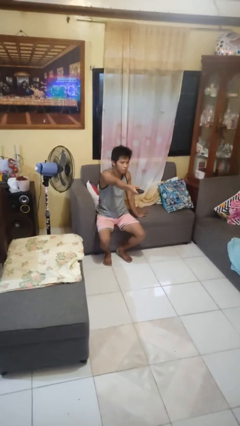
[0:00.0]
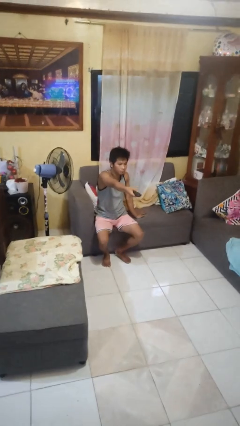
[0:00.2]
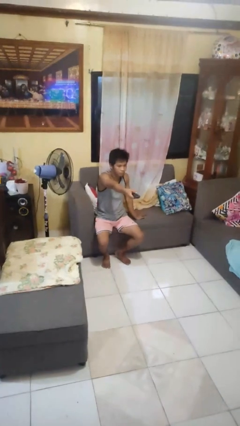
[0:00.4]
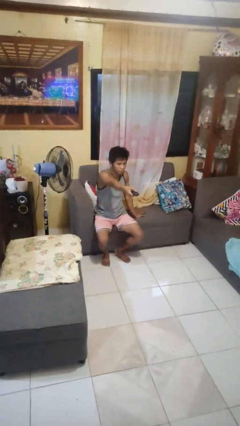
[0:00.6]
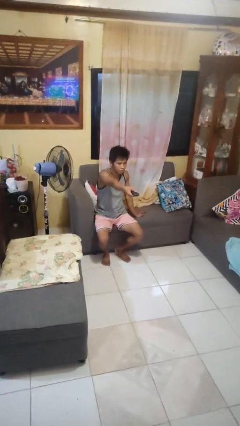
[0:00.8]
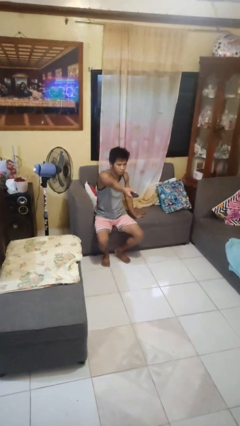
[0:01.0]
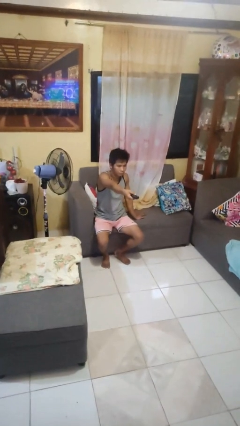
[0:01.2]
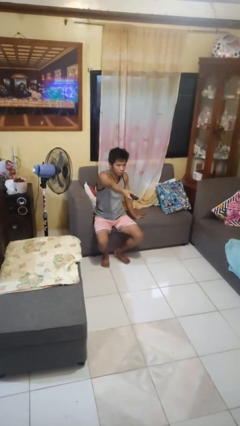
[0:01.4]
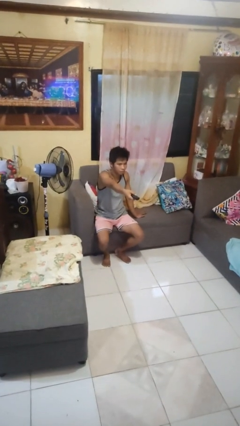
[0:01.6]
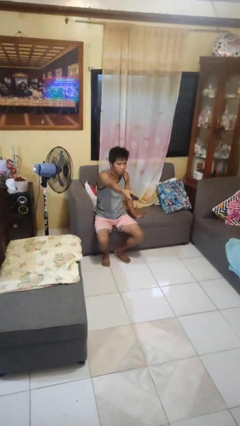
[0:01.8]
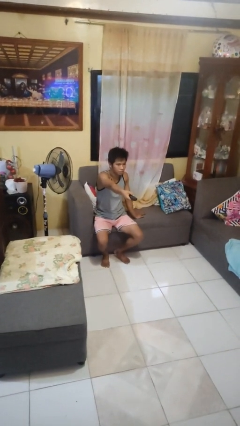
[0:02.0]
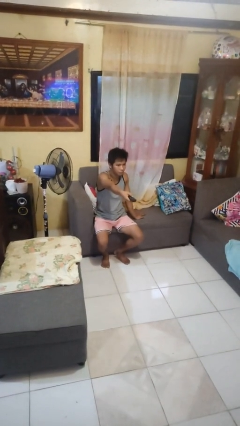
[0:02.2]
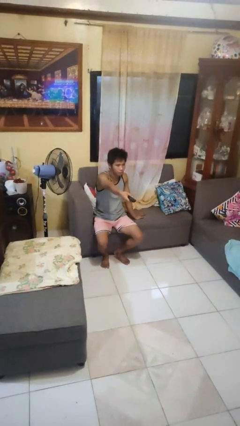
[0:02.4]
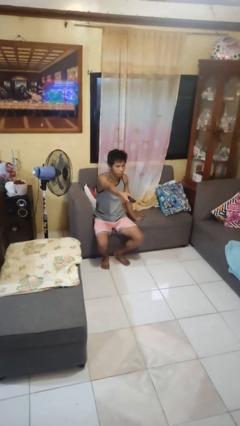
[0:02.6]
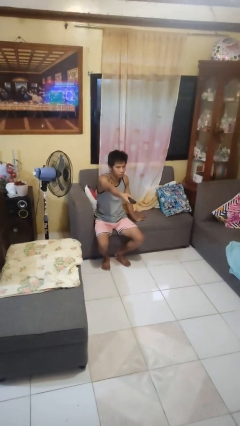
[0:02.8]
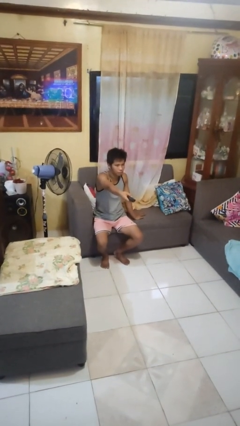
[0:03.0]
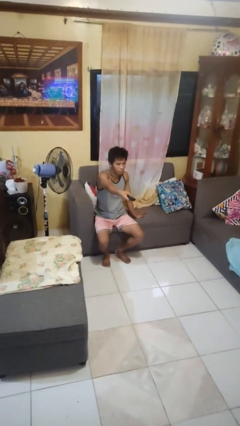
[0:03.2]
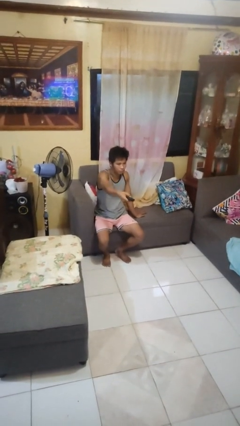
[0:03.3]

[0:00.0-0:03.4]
person uses television remote

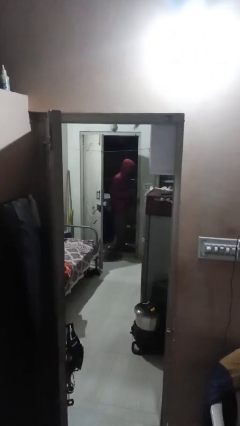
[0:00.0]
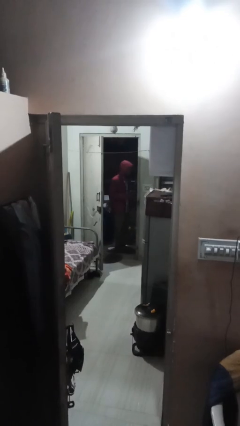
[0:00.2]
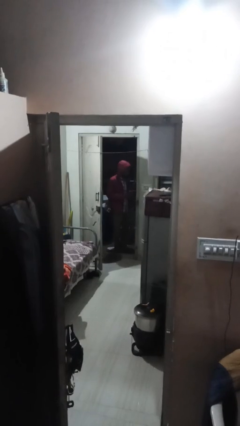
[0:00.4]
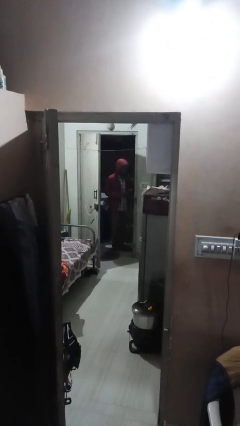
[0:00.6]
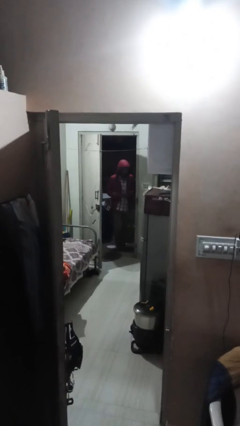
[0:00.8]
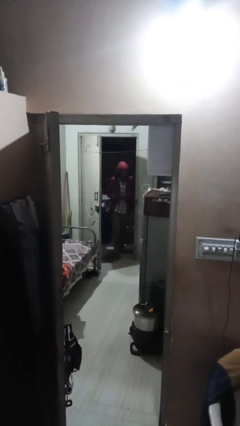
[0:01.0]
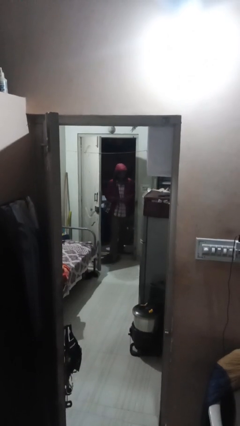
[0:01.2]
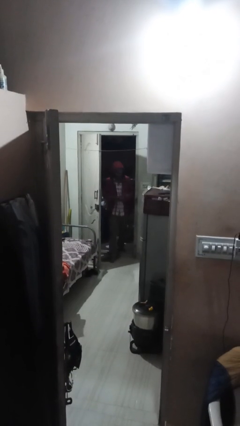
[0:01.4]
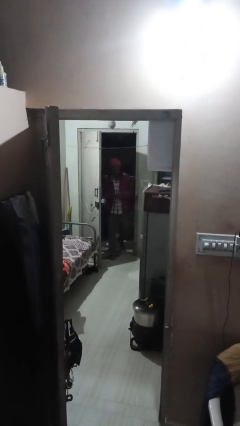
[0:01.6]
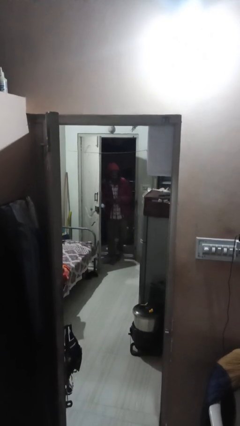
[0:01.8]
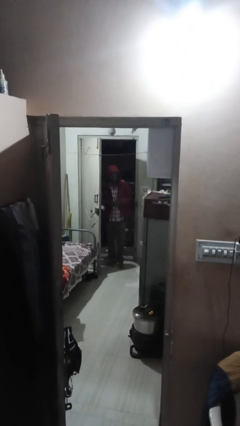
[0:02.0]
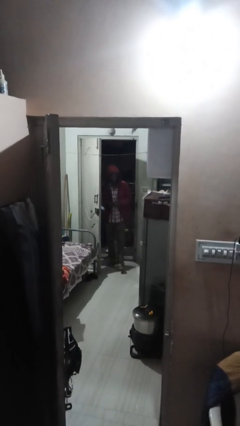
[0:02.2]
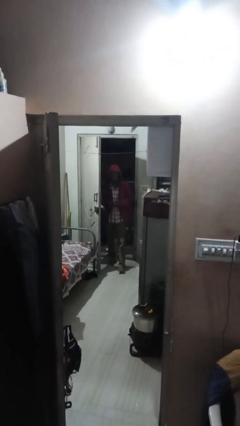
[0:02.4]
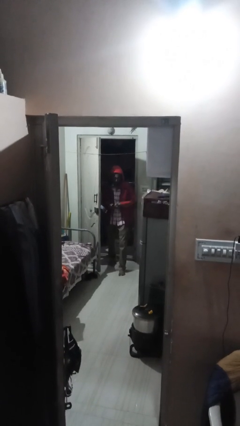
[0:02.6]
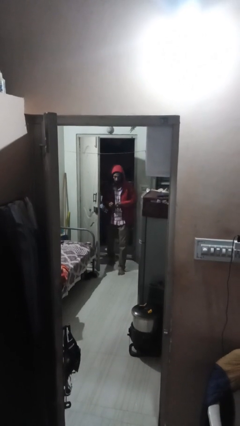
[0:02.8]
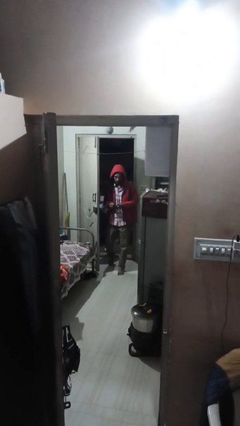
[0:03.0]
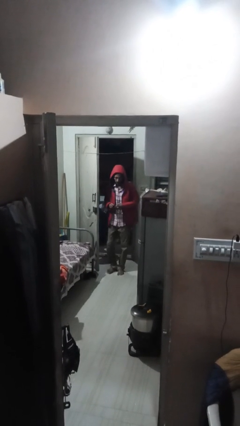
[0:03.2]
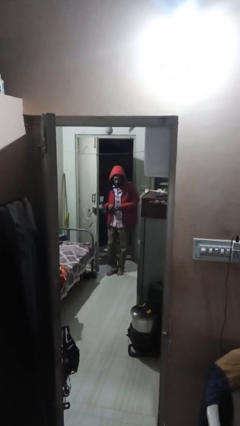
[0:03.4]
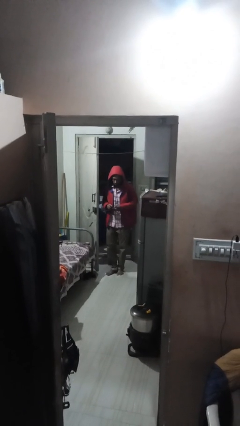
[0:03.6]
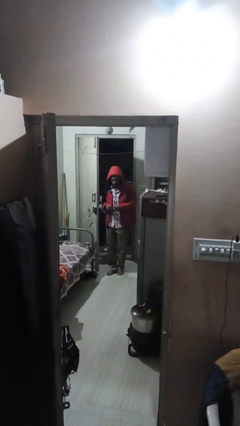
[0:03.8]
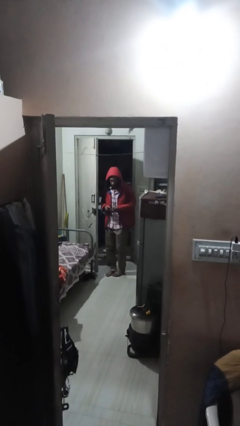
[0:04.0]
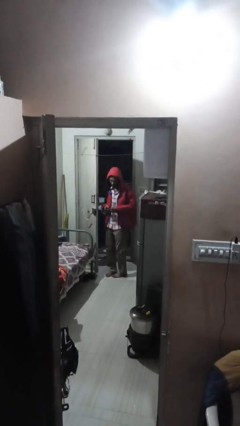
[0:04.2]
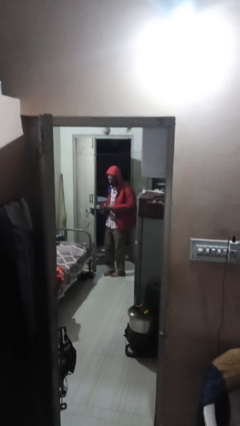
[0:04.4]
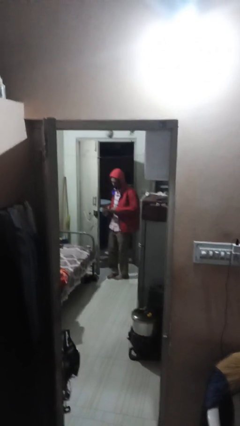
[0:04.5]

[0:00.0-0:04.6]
person enters scene through structure

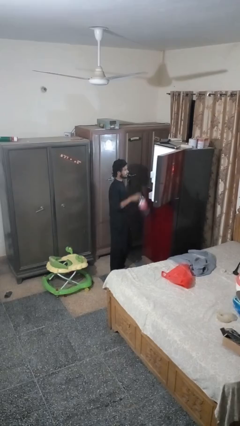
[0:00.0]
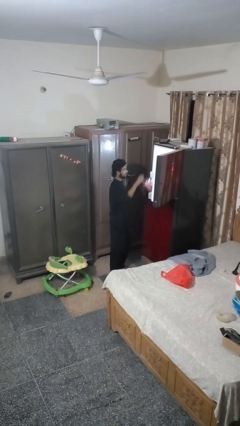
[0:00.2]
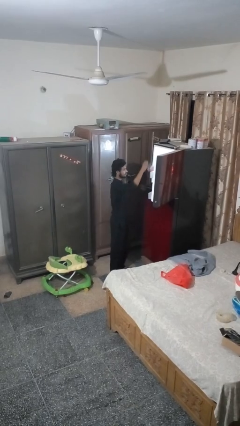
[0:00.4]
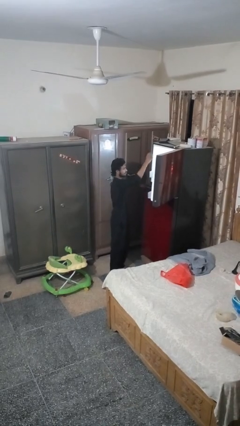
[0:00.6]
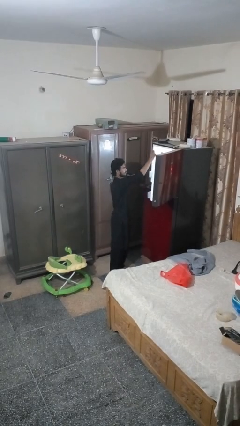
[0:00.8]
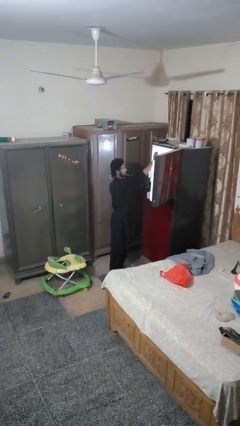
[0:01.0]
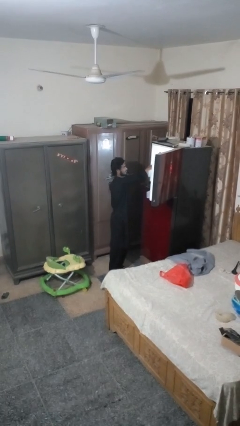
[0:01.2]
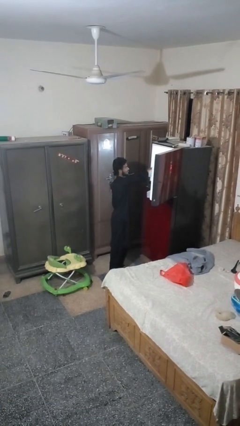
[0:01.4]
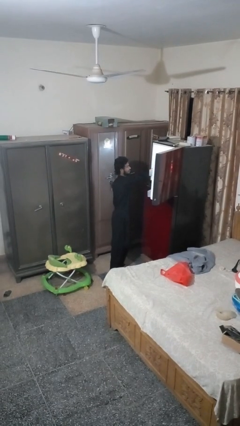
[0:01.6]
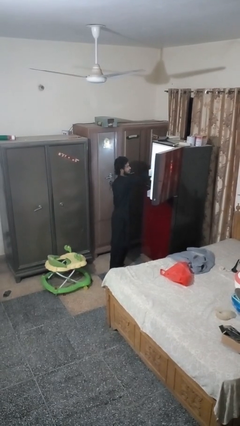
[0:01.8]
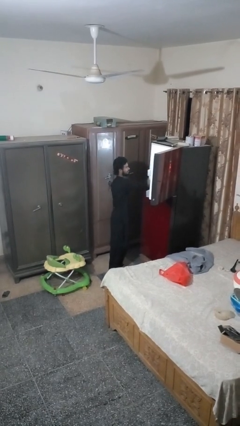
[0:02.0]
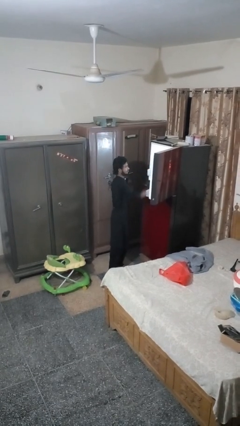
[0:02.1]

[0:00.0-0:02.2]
person puts object into refrigerator

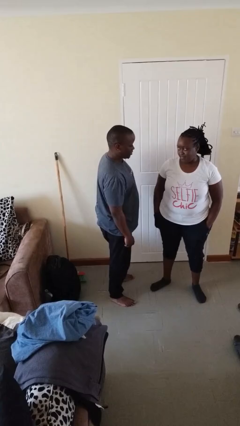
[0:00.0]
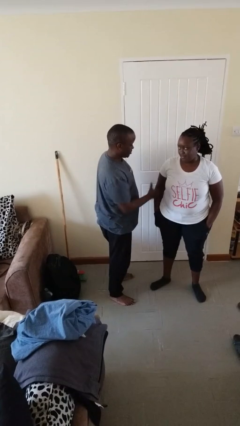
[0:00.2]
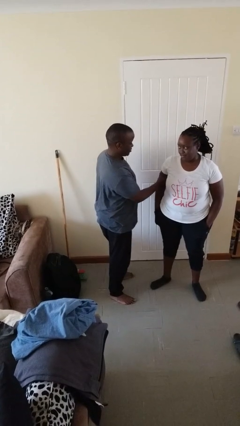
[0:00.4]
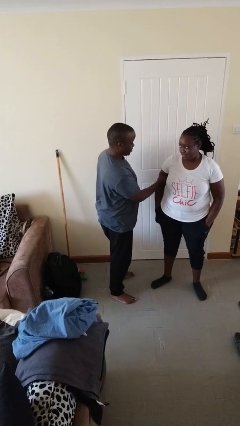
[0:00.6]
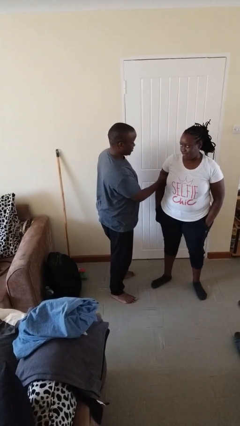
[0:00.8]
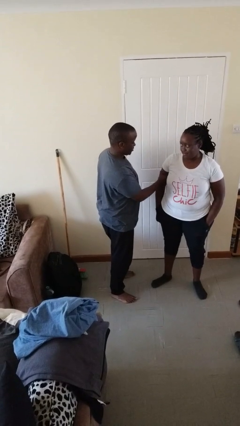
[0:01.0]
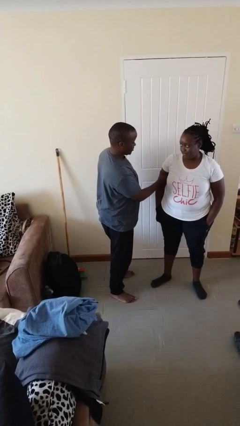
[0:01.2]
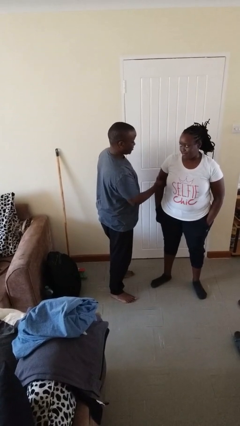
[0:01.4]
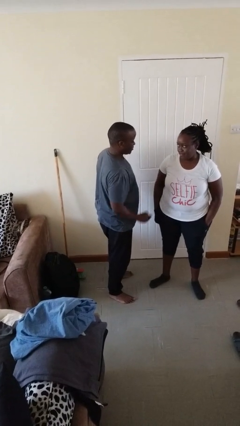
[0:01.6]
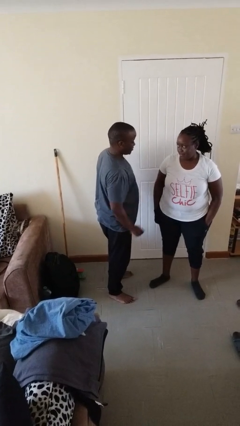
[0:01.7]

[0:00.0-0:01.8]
person grabs person by bicep

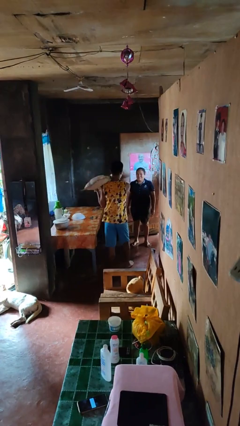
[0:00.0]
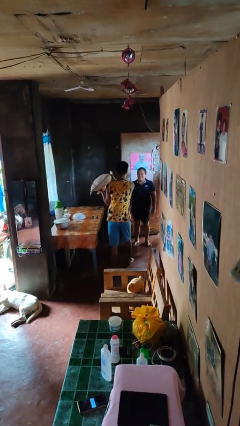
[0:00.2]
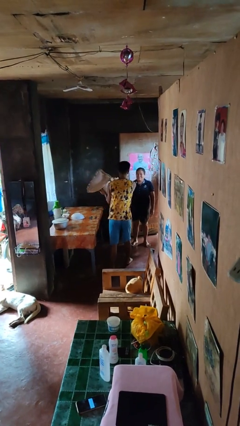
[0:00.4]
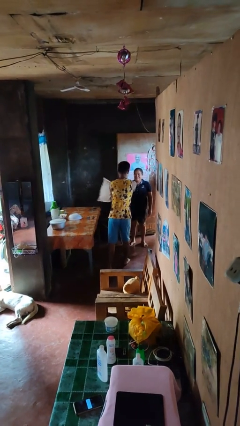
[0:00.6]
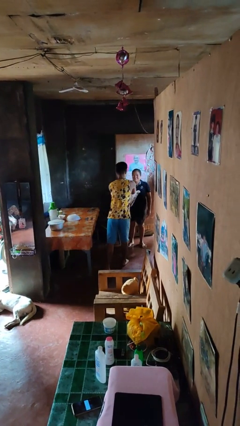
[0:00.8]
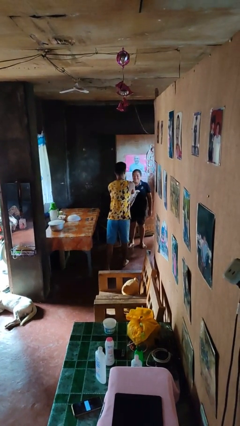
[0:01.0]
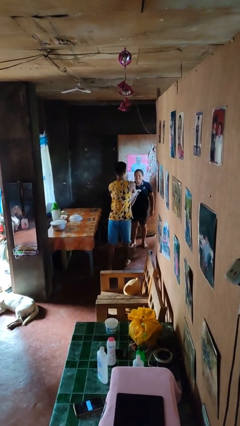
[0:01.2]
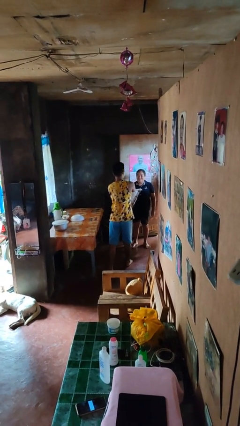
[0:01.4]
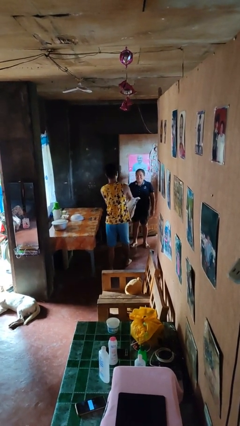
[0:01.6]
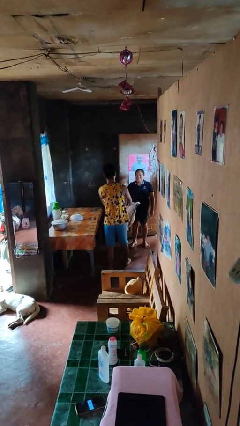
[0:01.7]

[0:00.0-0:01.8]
person hits person with pillow

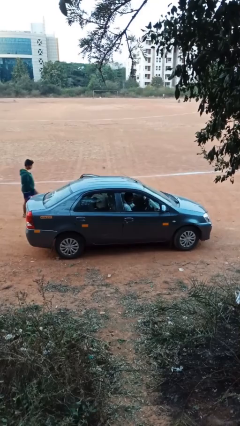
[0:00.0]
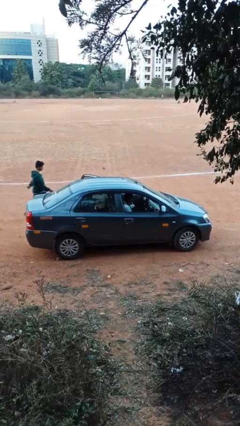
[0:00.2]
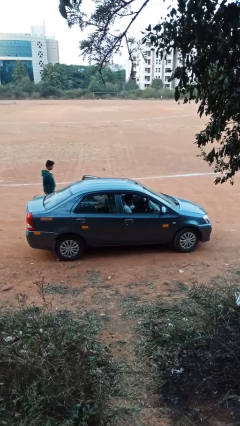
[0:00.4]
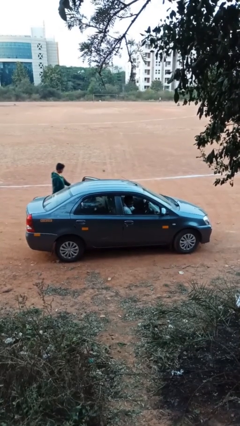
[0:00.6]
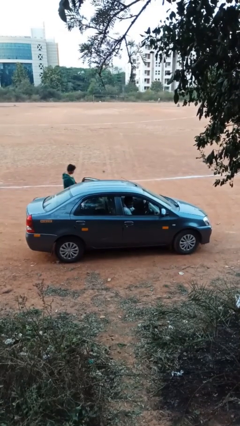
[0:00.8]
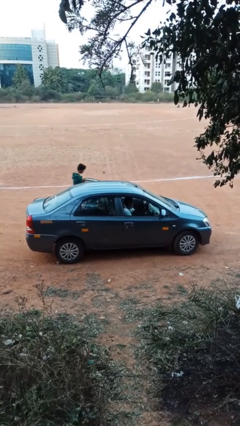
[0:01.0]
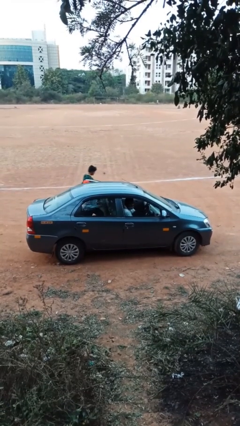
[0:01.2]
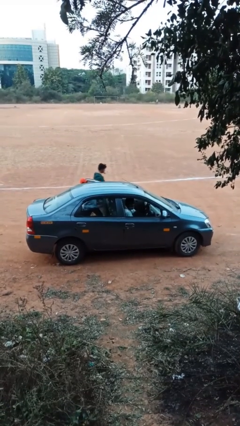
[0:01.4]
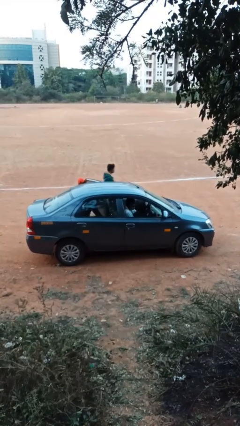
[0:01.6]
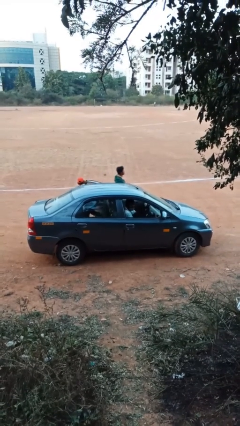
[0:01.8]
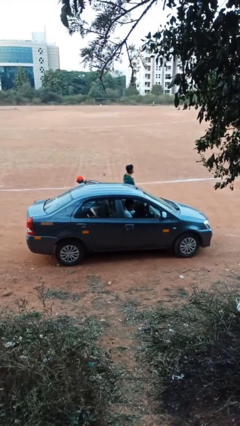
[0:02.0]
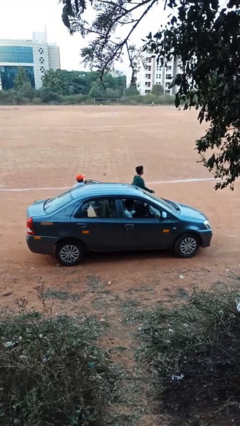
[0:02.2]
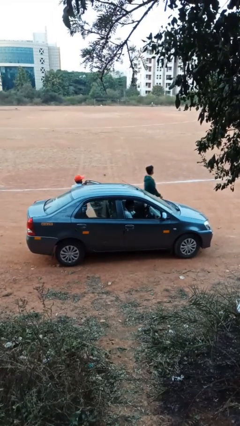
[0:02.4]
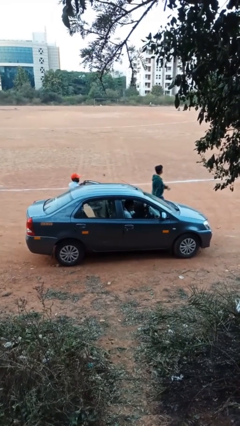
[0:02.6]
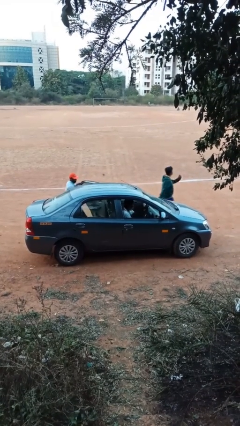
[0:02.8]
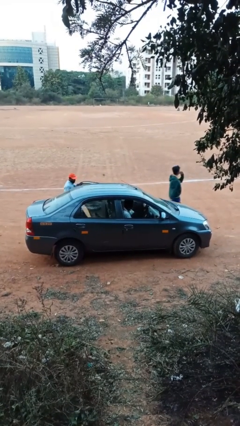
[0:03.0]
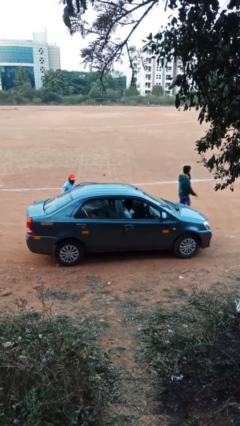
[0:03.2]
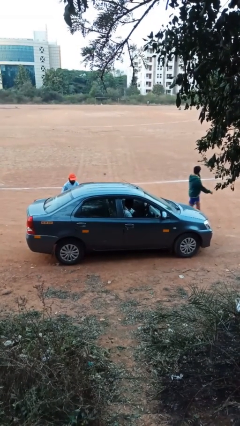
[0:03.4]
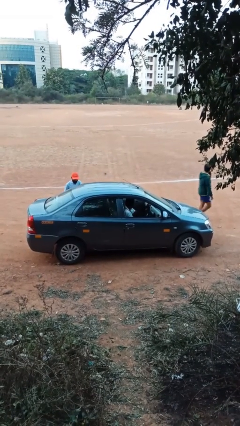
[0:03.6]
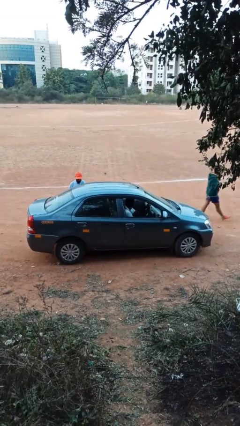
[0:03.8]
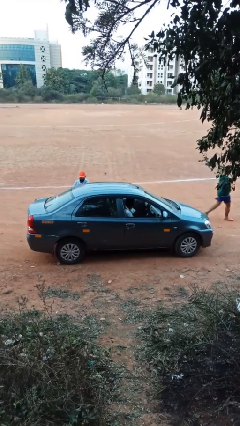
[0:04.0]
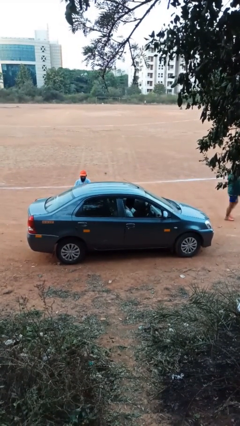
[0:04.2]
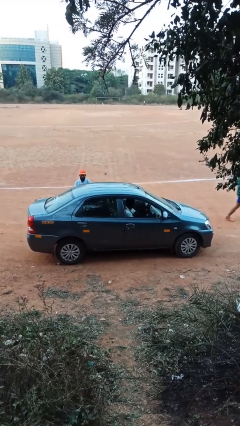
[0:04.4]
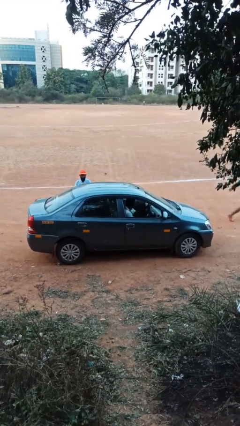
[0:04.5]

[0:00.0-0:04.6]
car drops off person
